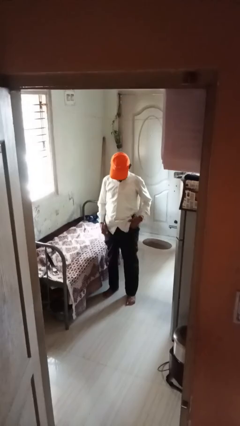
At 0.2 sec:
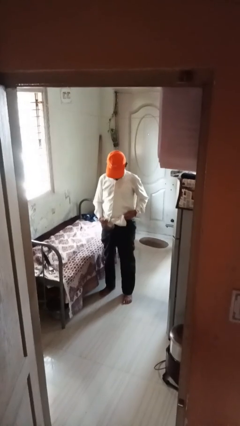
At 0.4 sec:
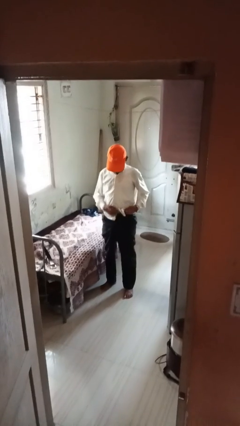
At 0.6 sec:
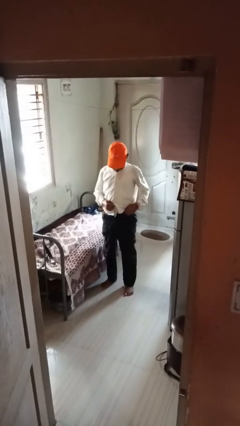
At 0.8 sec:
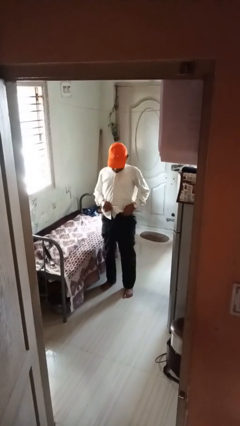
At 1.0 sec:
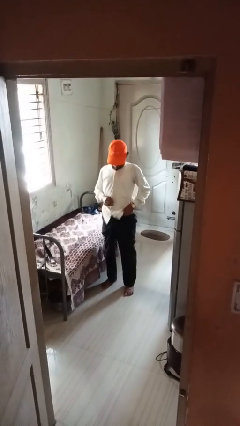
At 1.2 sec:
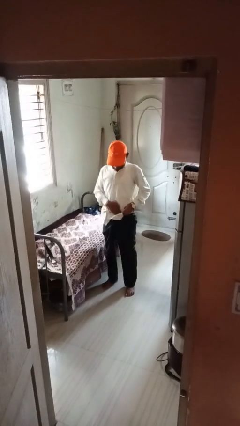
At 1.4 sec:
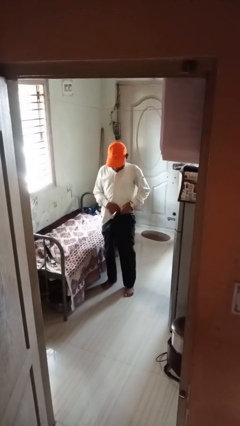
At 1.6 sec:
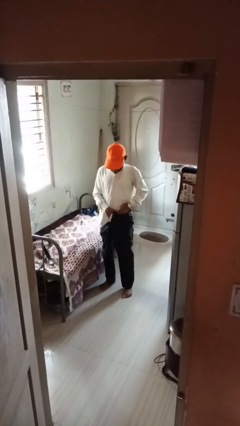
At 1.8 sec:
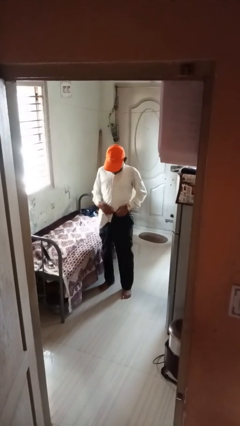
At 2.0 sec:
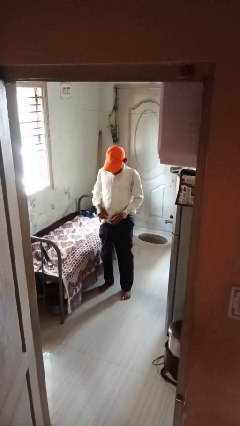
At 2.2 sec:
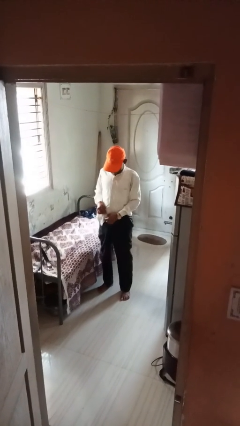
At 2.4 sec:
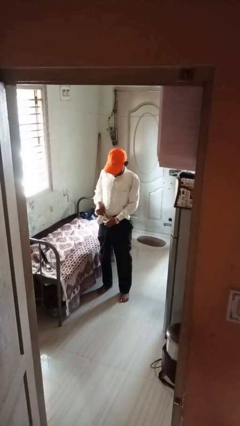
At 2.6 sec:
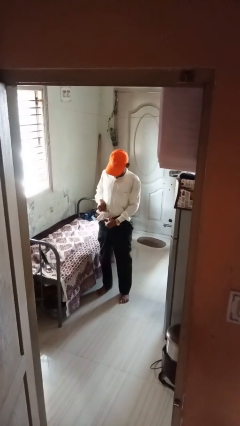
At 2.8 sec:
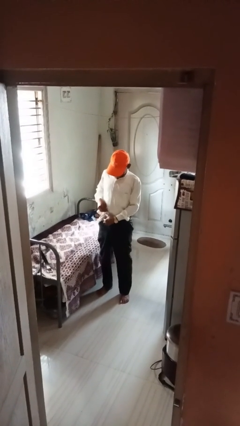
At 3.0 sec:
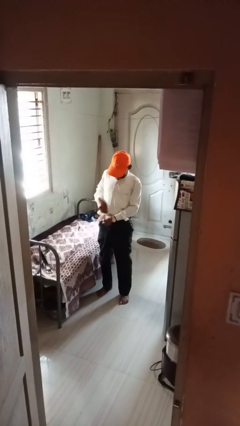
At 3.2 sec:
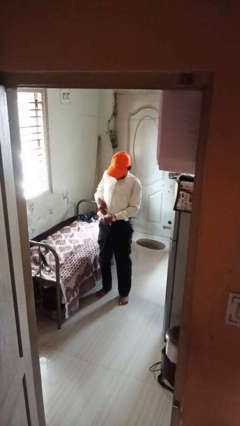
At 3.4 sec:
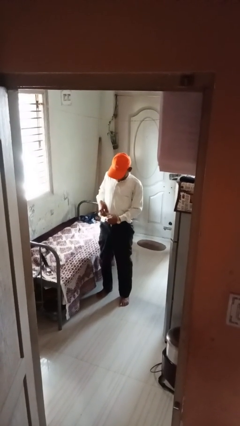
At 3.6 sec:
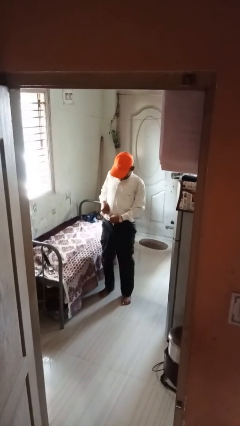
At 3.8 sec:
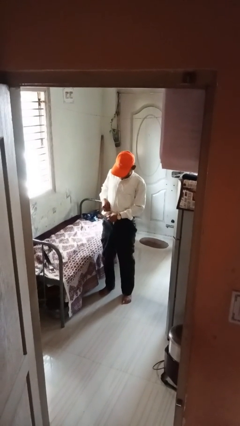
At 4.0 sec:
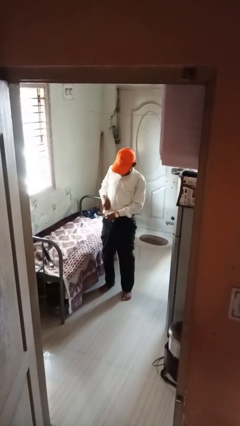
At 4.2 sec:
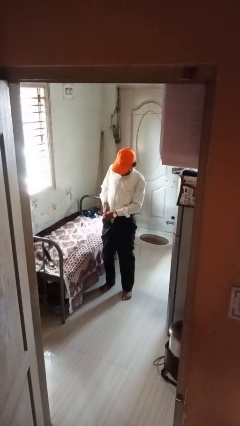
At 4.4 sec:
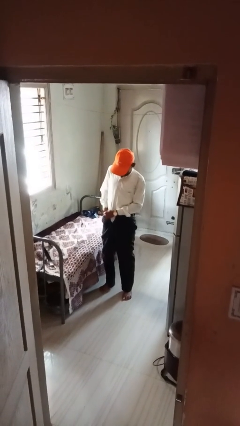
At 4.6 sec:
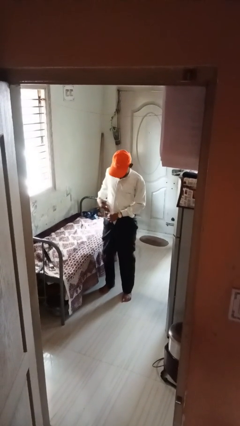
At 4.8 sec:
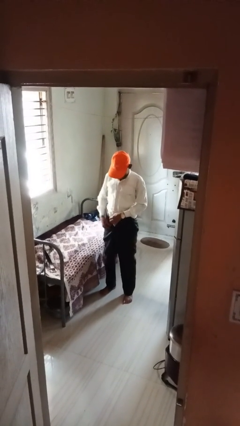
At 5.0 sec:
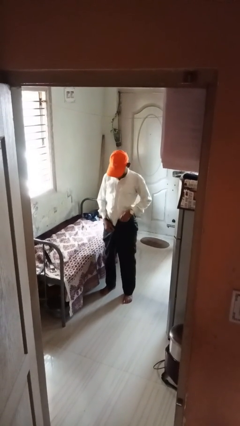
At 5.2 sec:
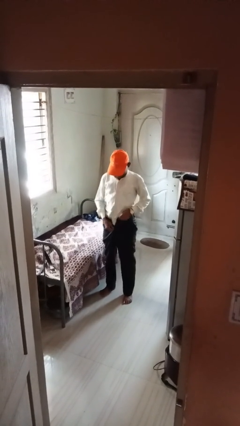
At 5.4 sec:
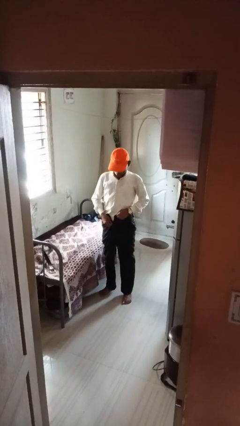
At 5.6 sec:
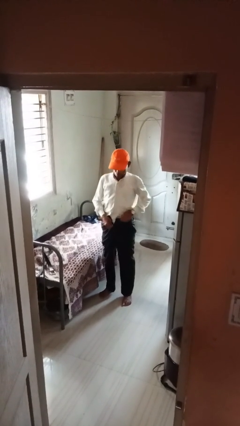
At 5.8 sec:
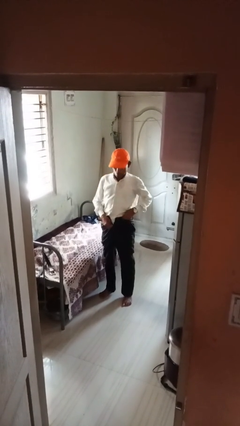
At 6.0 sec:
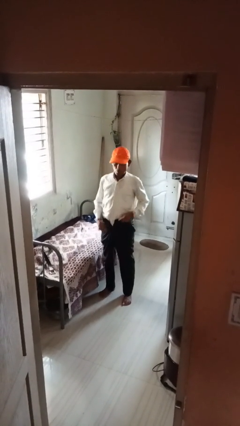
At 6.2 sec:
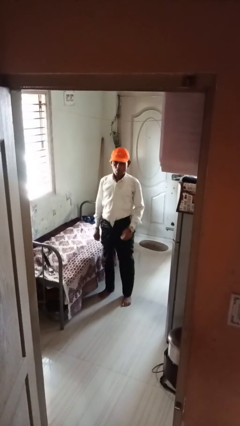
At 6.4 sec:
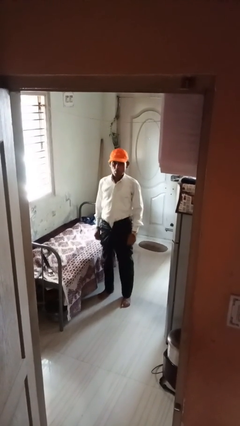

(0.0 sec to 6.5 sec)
person tucks in shirt

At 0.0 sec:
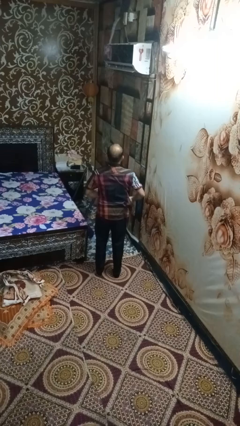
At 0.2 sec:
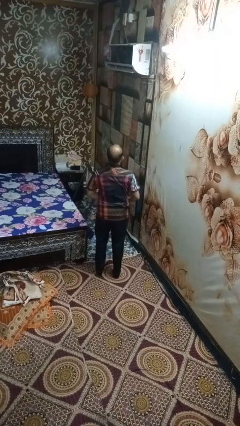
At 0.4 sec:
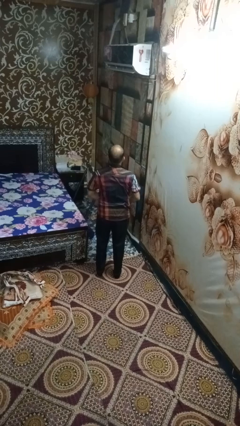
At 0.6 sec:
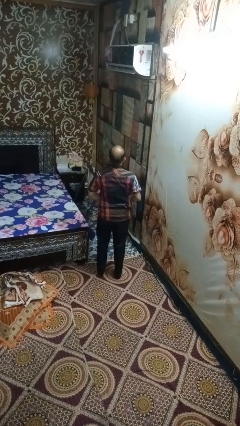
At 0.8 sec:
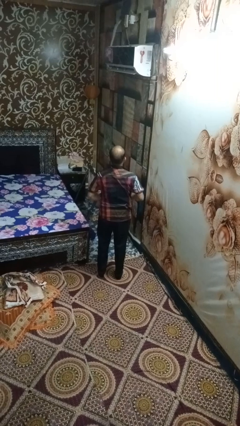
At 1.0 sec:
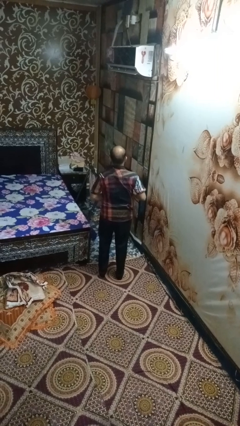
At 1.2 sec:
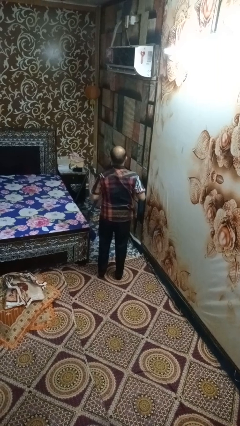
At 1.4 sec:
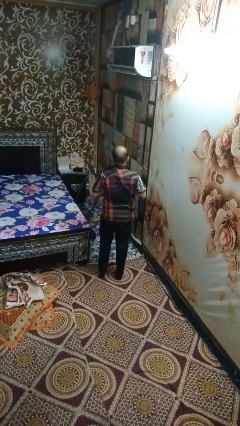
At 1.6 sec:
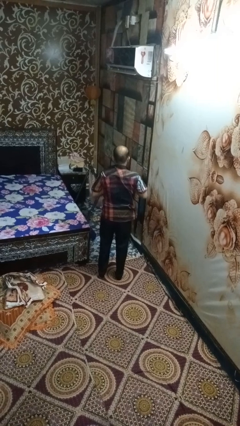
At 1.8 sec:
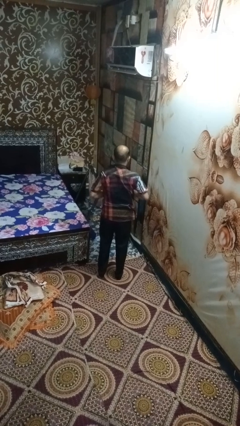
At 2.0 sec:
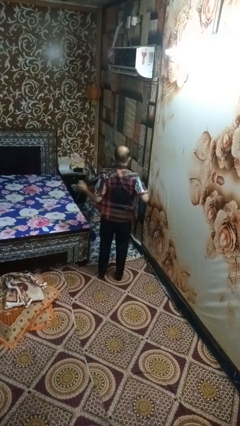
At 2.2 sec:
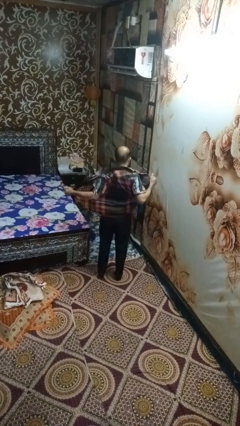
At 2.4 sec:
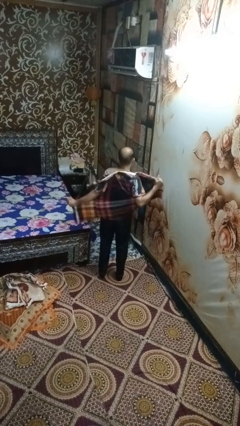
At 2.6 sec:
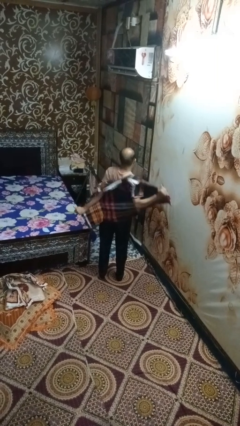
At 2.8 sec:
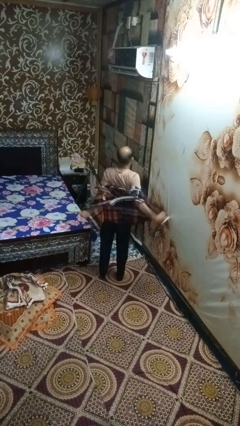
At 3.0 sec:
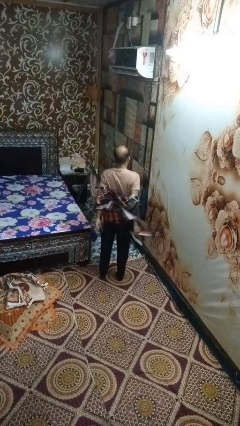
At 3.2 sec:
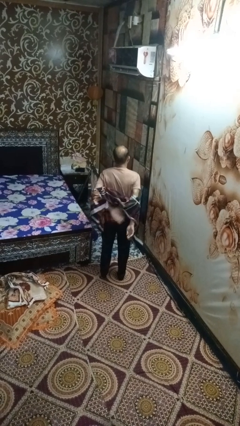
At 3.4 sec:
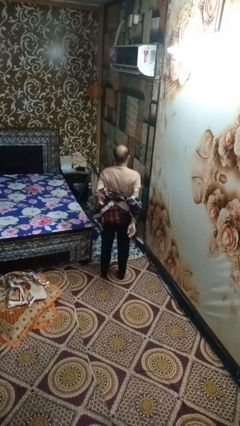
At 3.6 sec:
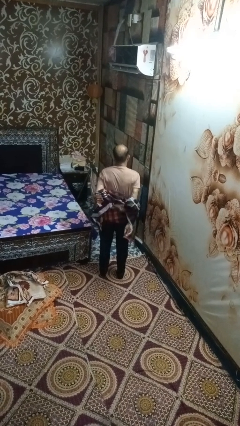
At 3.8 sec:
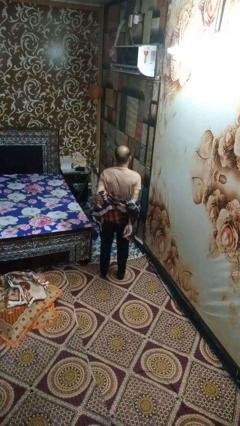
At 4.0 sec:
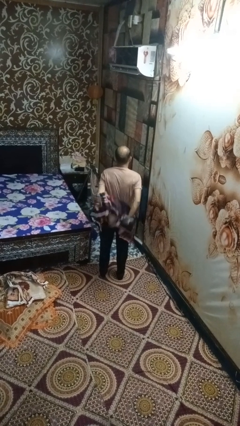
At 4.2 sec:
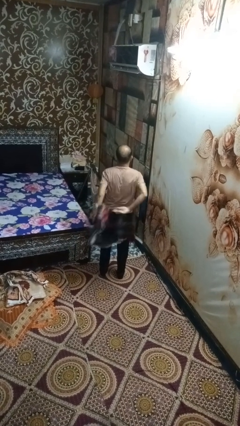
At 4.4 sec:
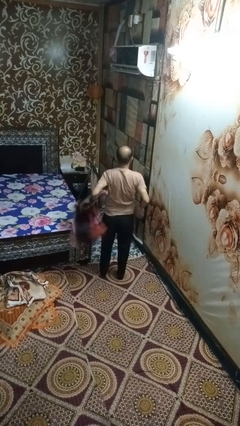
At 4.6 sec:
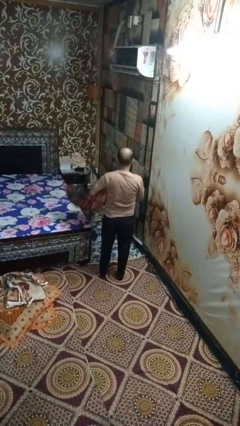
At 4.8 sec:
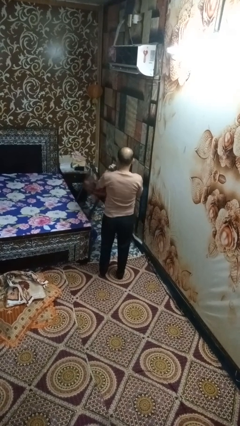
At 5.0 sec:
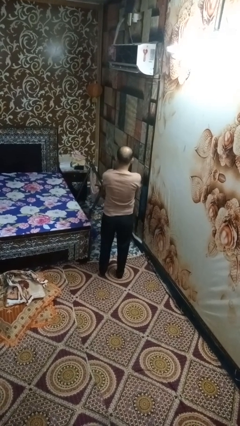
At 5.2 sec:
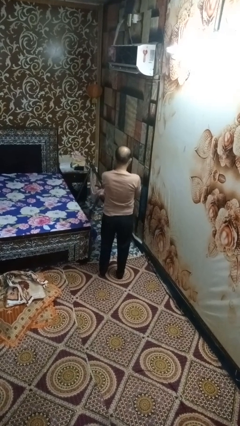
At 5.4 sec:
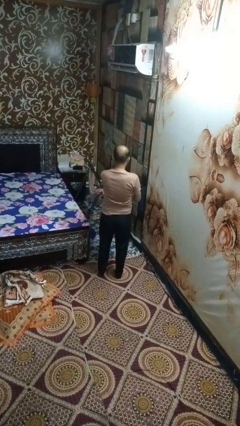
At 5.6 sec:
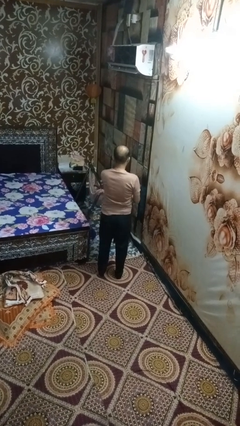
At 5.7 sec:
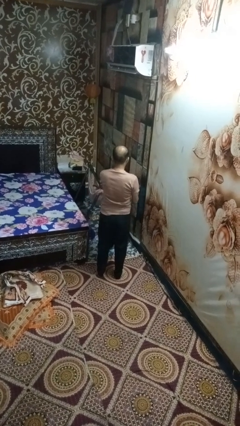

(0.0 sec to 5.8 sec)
person takes off shirt

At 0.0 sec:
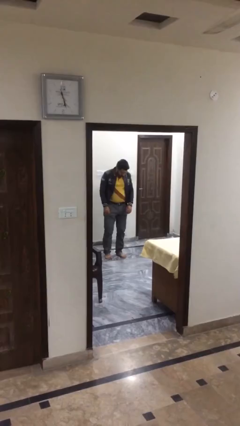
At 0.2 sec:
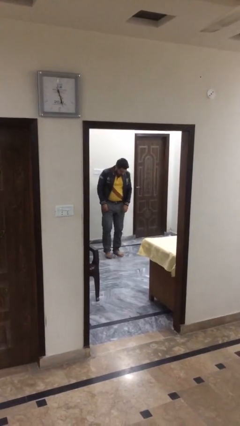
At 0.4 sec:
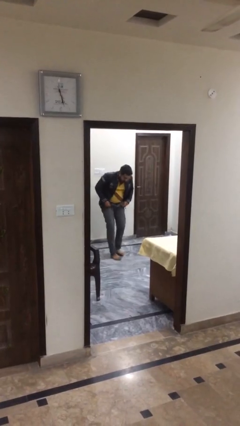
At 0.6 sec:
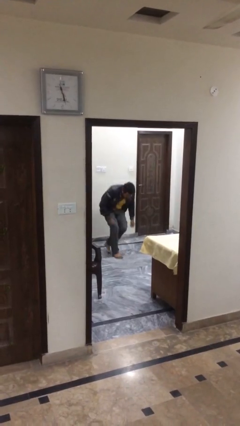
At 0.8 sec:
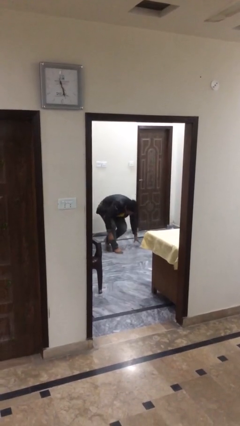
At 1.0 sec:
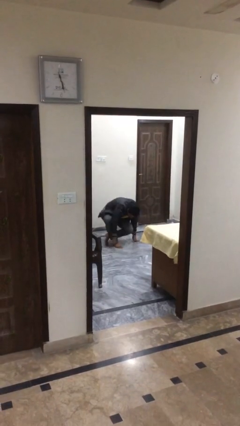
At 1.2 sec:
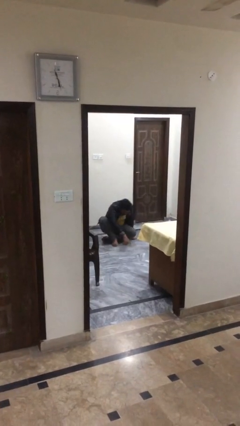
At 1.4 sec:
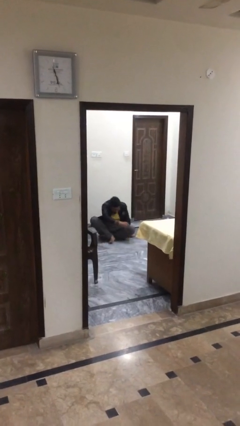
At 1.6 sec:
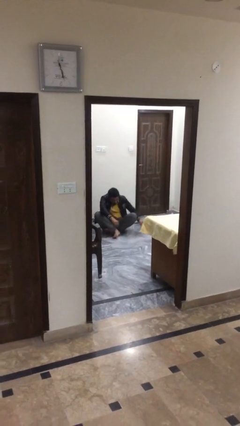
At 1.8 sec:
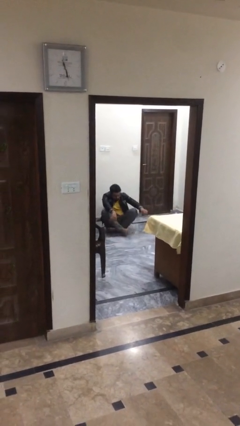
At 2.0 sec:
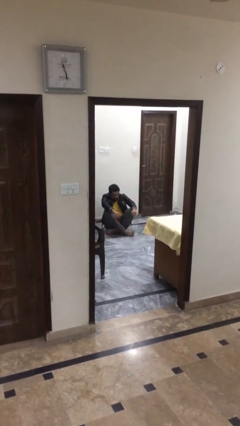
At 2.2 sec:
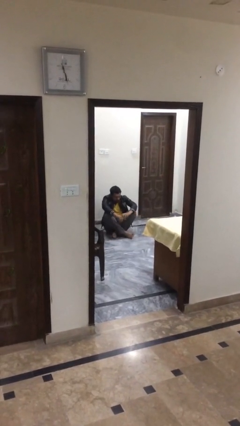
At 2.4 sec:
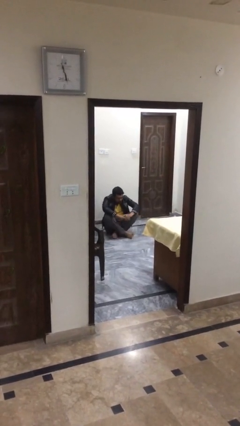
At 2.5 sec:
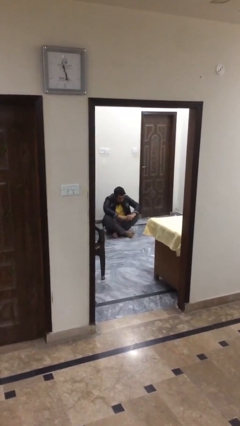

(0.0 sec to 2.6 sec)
person sits down

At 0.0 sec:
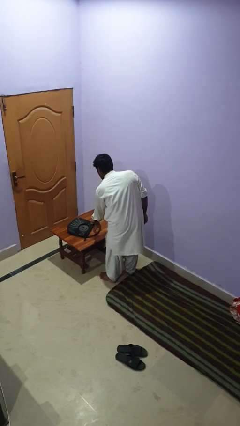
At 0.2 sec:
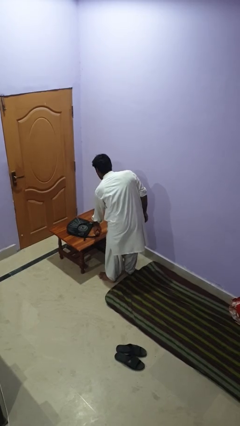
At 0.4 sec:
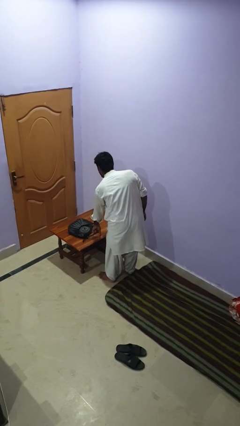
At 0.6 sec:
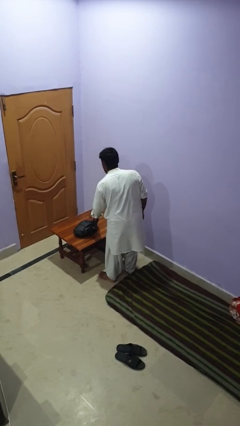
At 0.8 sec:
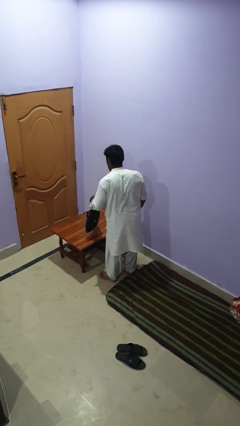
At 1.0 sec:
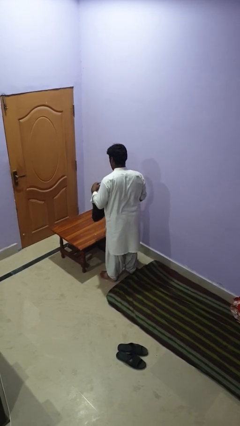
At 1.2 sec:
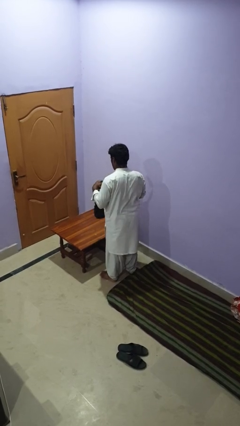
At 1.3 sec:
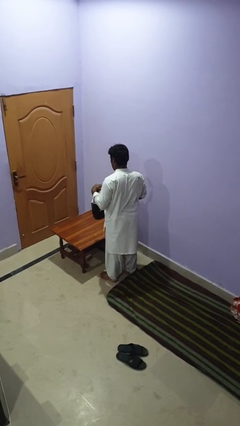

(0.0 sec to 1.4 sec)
person picks up object from table

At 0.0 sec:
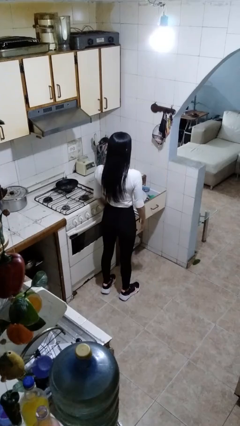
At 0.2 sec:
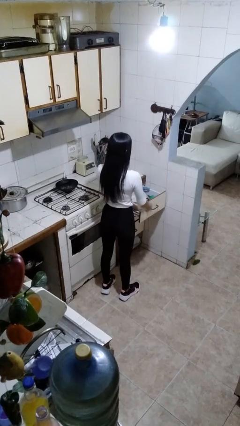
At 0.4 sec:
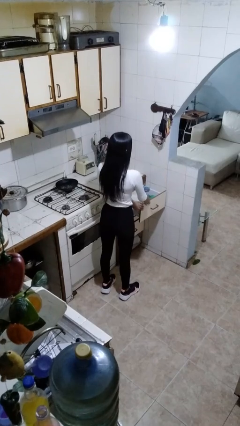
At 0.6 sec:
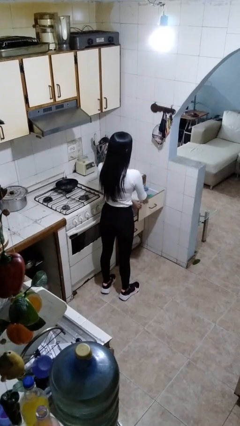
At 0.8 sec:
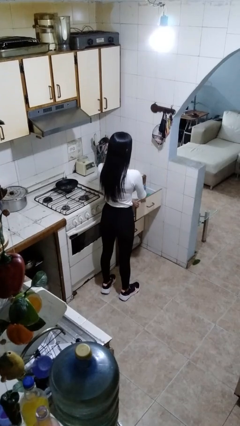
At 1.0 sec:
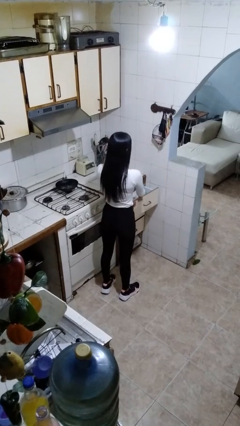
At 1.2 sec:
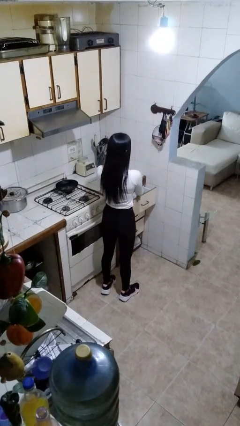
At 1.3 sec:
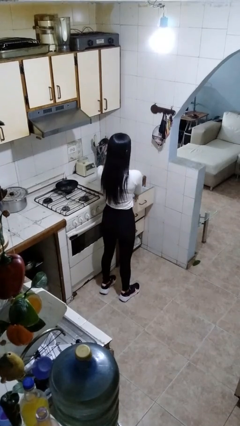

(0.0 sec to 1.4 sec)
person closes kitchen drawer
